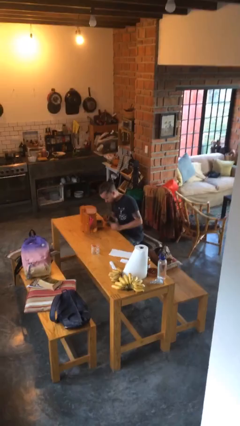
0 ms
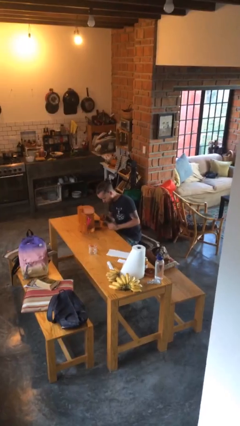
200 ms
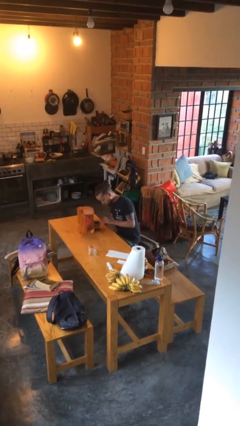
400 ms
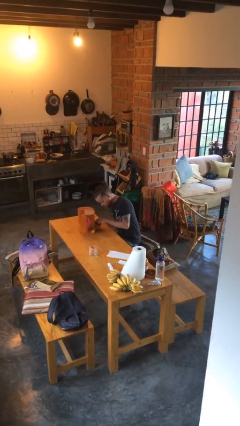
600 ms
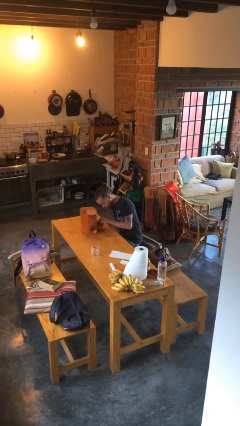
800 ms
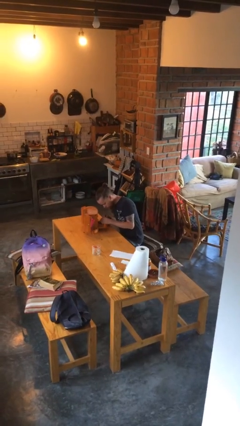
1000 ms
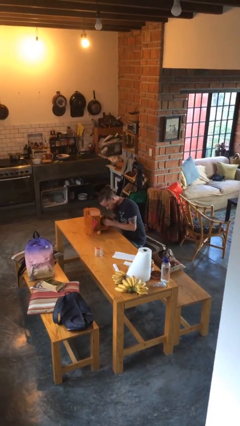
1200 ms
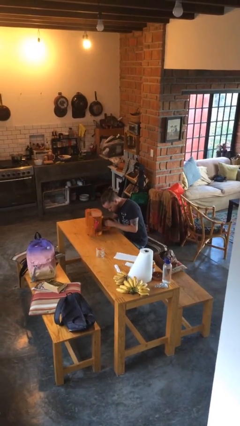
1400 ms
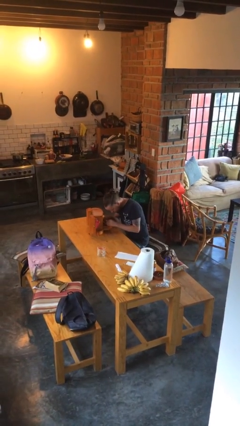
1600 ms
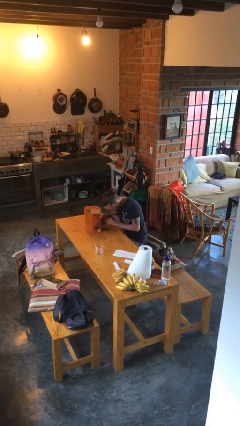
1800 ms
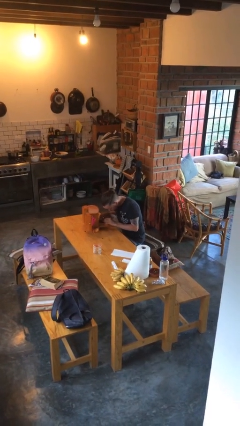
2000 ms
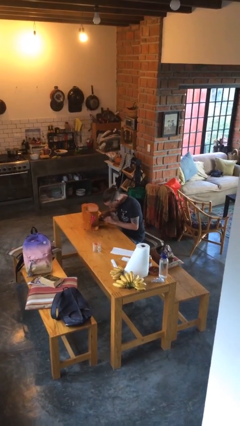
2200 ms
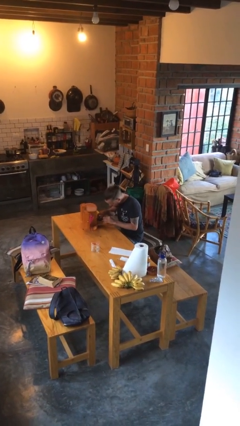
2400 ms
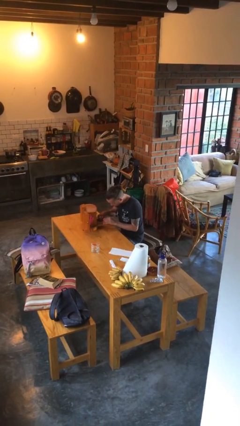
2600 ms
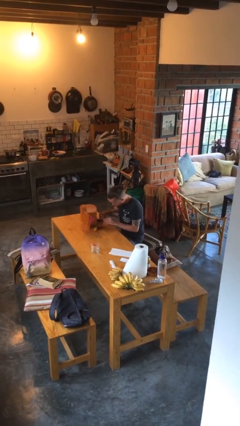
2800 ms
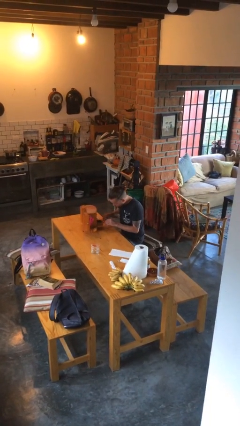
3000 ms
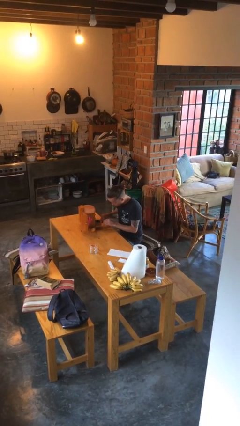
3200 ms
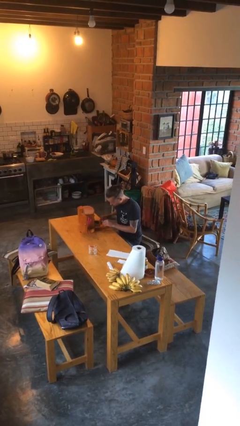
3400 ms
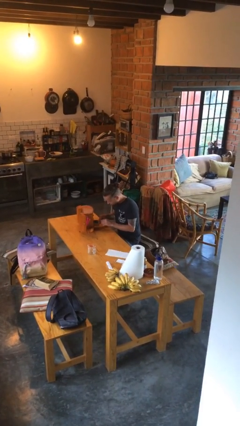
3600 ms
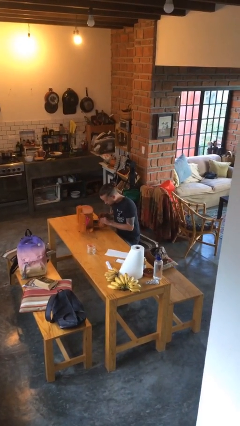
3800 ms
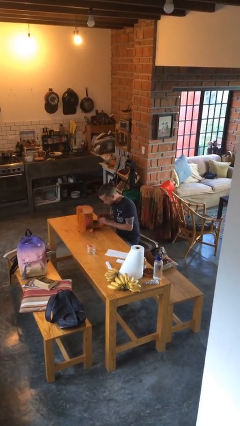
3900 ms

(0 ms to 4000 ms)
person searches jewelry box

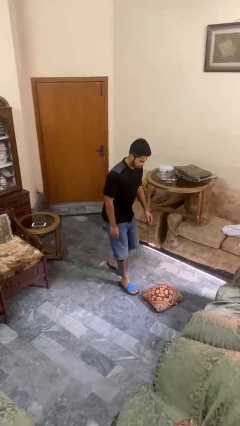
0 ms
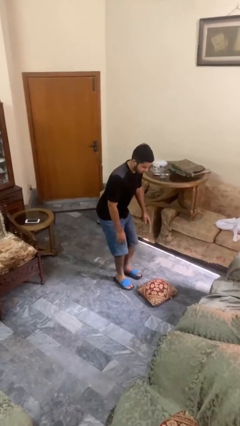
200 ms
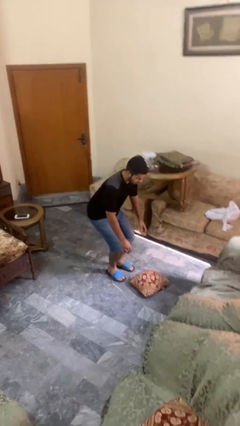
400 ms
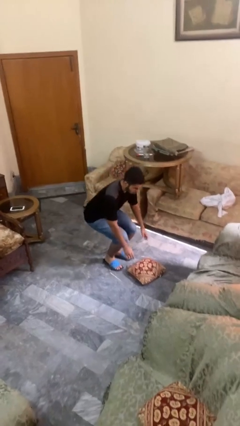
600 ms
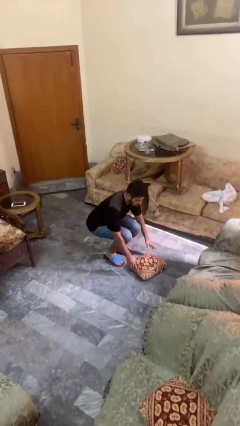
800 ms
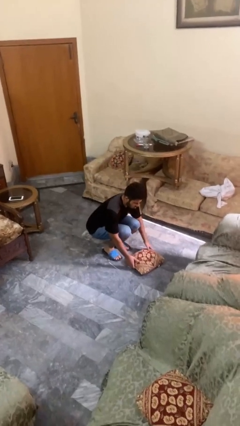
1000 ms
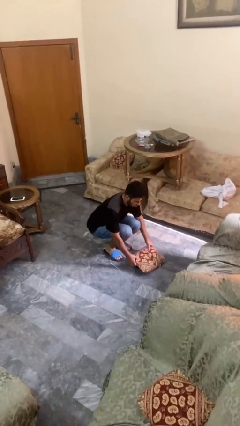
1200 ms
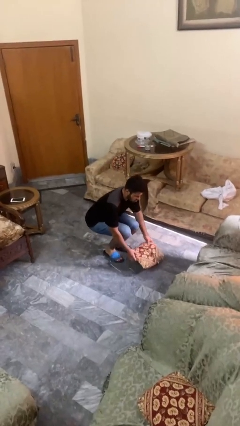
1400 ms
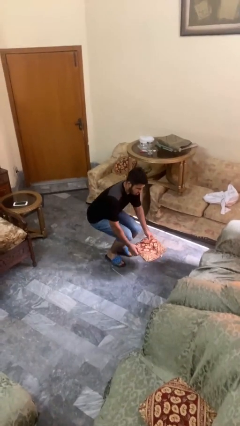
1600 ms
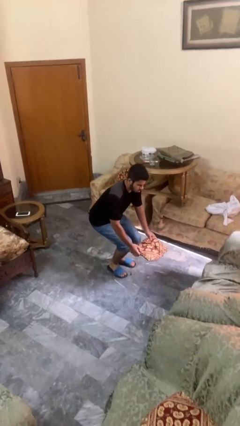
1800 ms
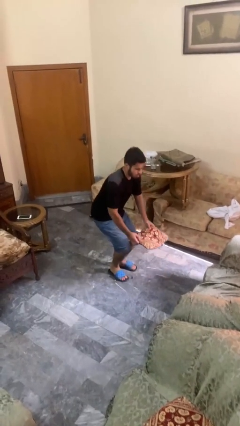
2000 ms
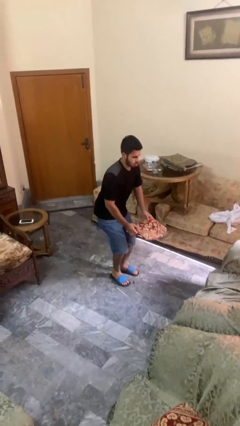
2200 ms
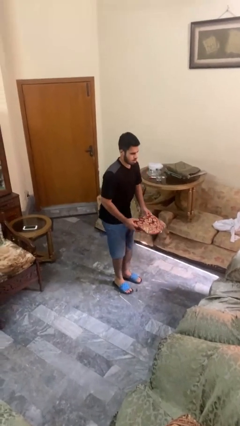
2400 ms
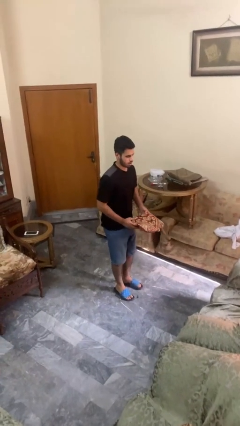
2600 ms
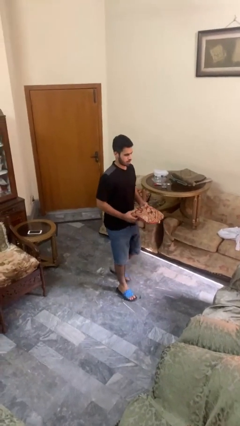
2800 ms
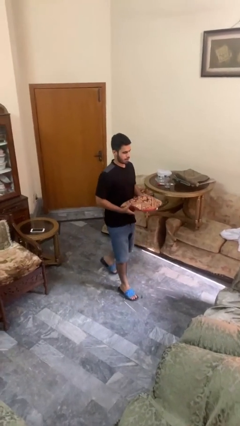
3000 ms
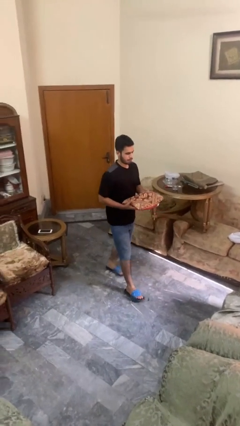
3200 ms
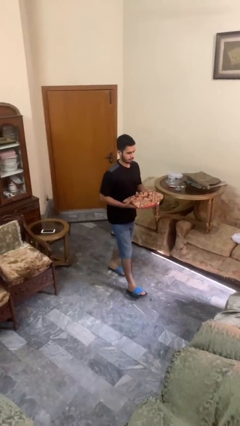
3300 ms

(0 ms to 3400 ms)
person picks up object from floor

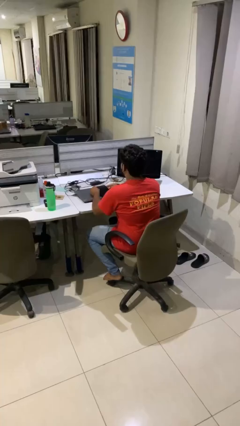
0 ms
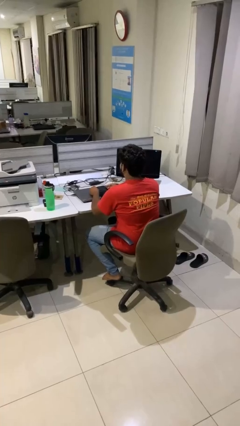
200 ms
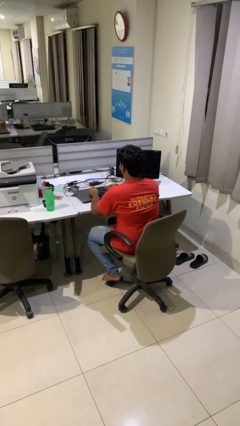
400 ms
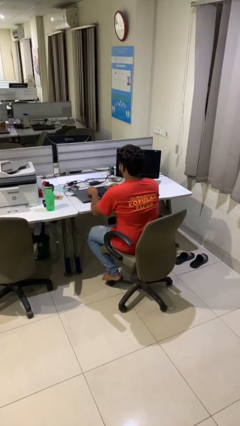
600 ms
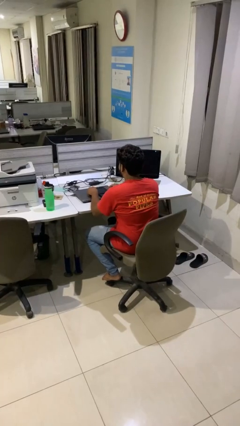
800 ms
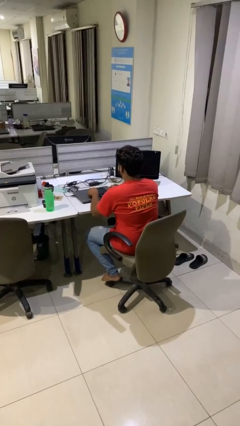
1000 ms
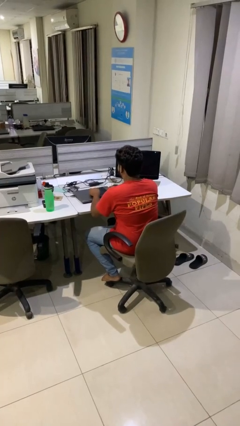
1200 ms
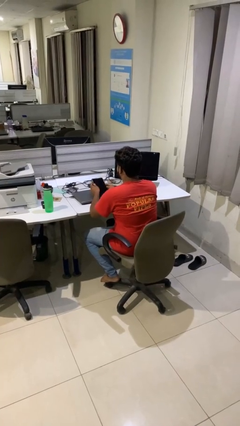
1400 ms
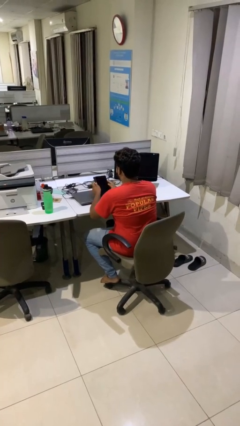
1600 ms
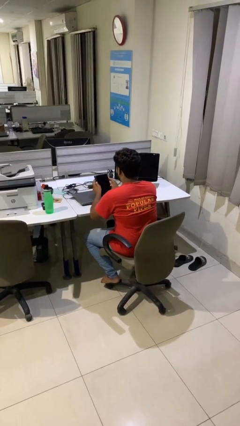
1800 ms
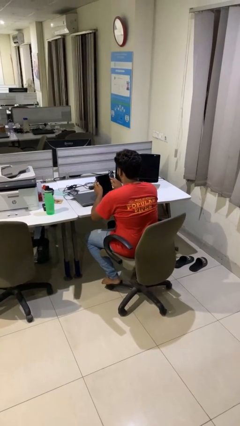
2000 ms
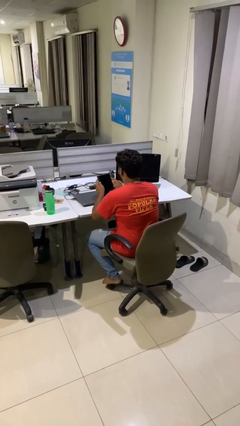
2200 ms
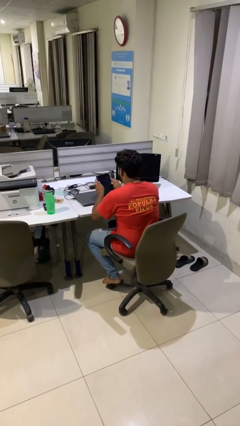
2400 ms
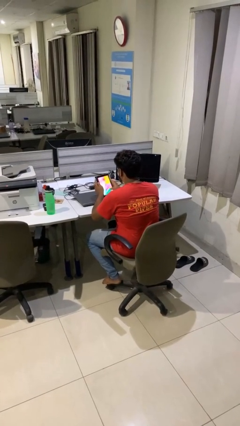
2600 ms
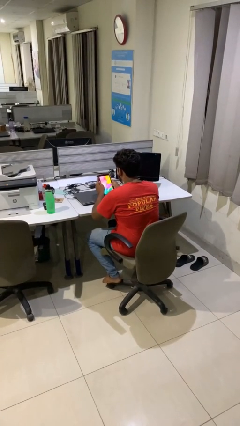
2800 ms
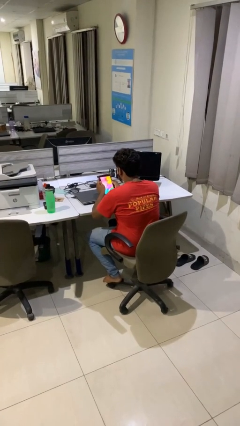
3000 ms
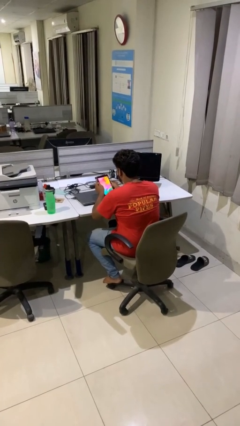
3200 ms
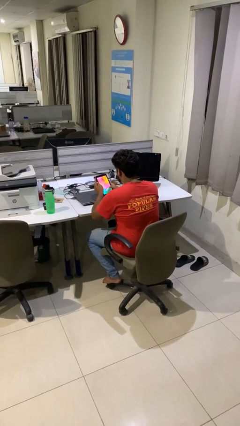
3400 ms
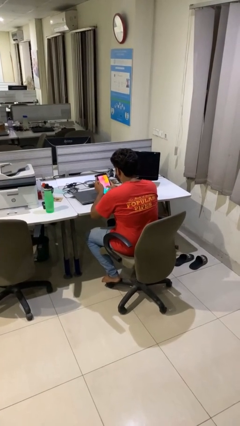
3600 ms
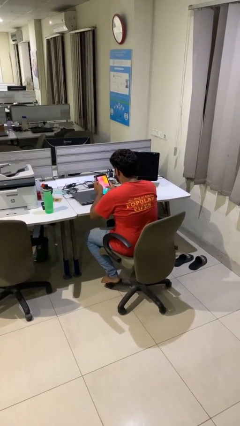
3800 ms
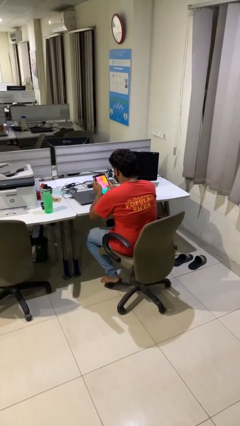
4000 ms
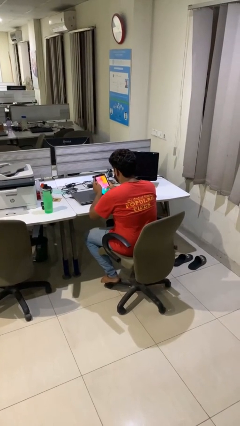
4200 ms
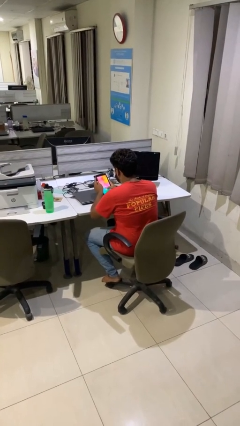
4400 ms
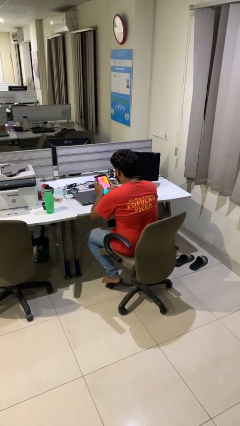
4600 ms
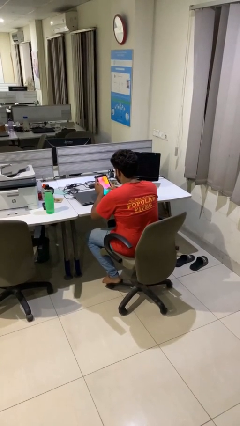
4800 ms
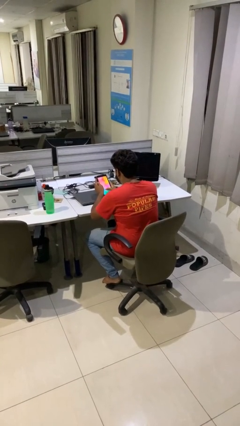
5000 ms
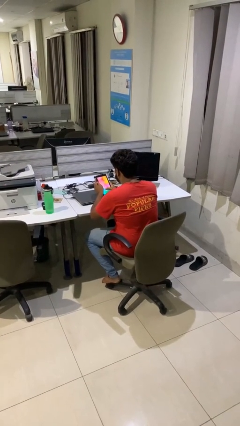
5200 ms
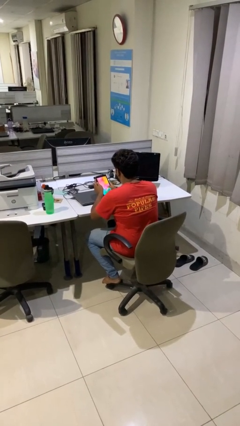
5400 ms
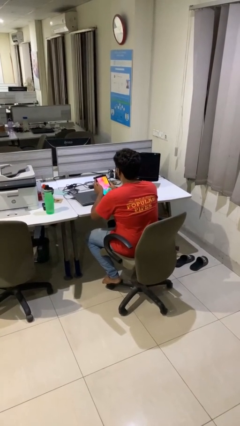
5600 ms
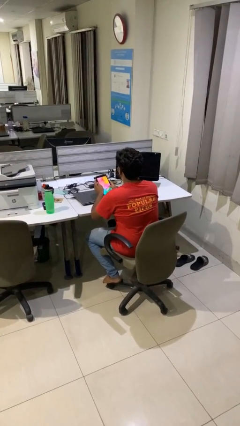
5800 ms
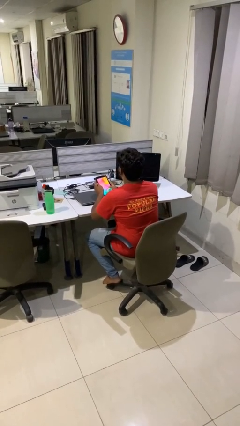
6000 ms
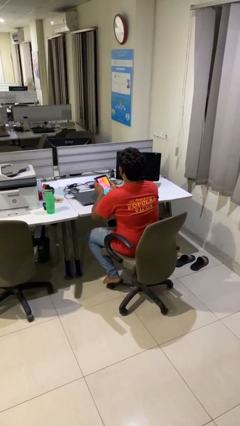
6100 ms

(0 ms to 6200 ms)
person interacts with tablet

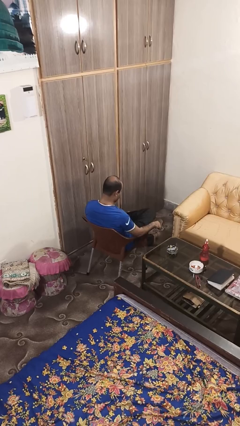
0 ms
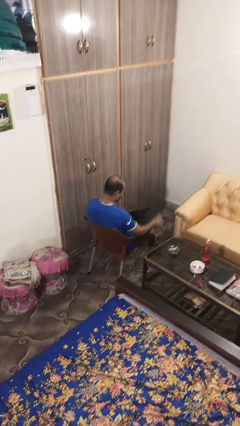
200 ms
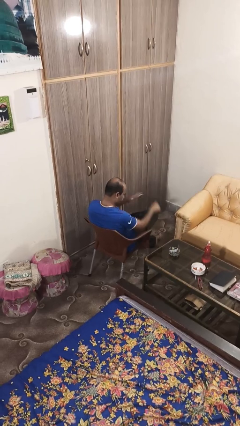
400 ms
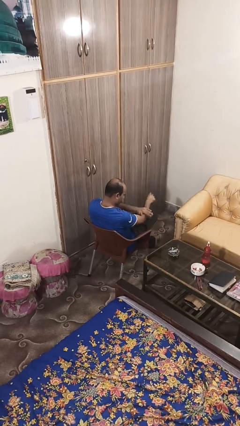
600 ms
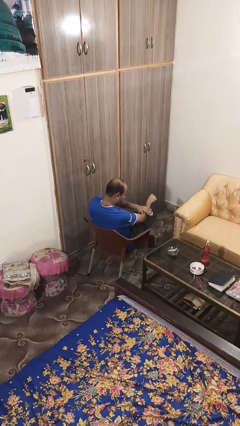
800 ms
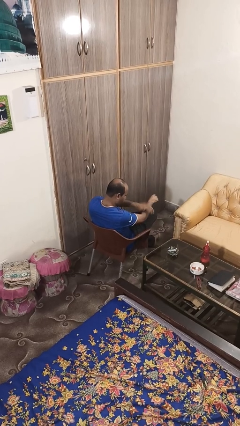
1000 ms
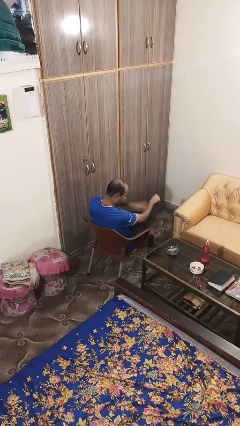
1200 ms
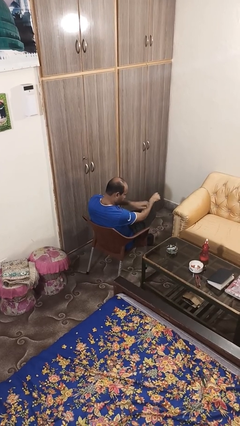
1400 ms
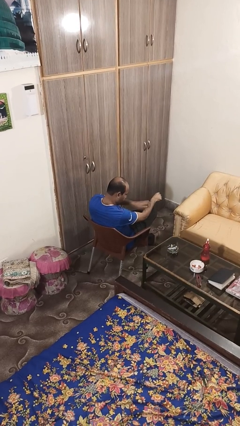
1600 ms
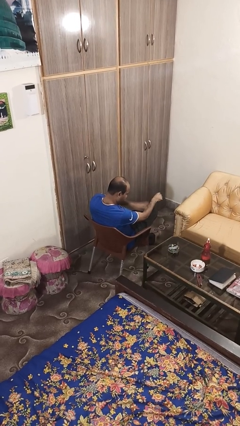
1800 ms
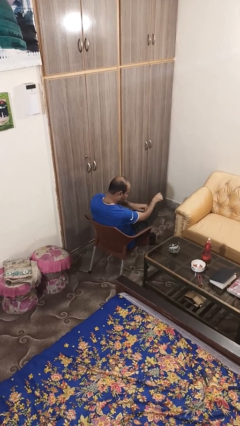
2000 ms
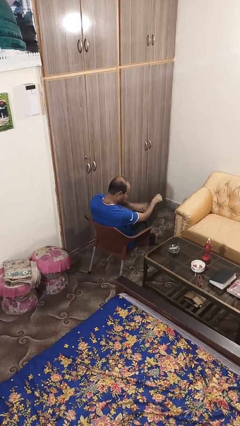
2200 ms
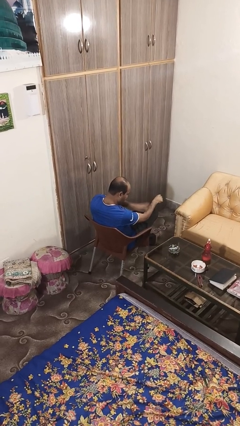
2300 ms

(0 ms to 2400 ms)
person swats bug

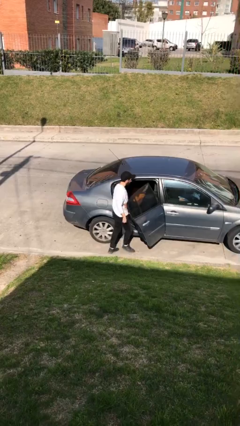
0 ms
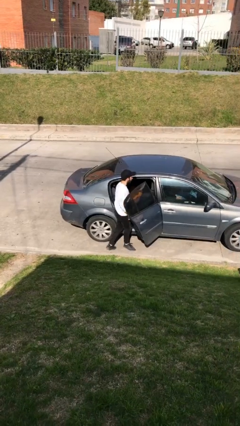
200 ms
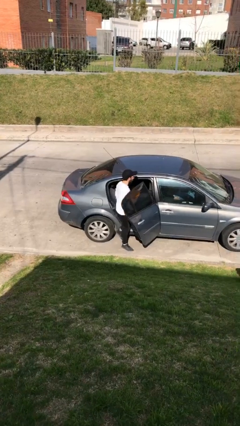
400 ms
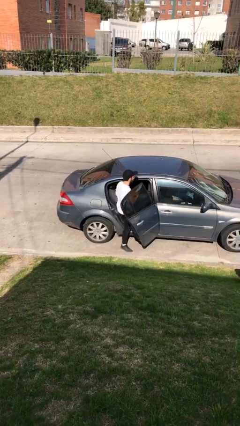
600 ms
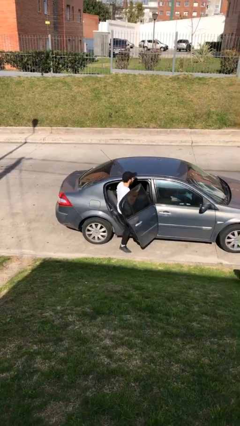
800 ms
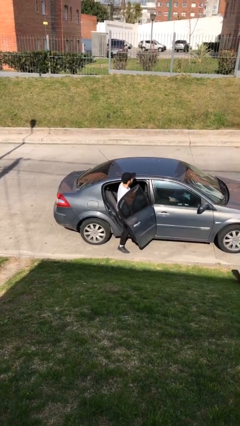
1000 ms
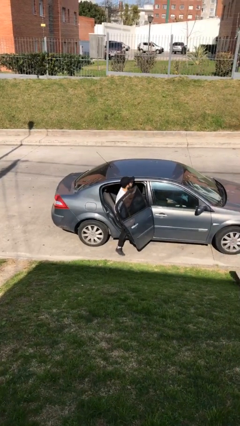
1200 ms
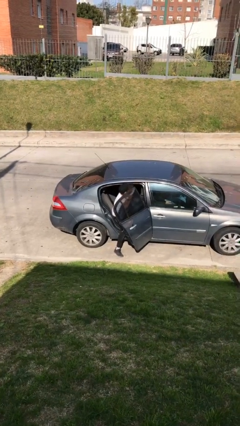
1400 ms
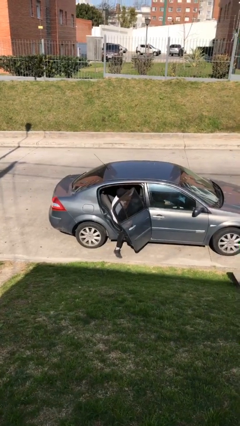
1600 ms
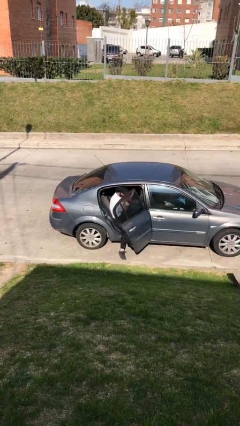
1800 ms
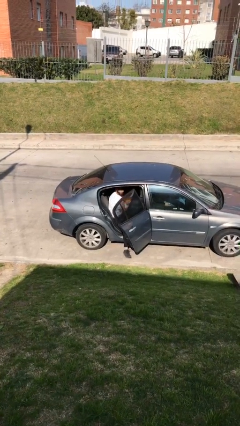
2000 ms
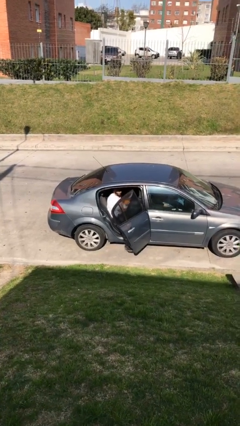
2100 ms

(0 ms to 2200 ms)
person enters car
